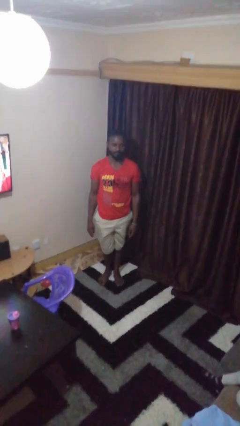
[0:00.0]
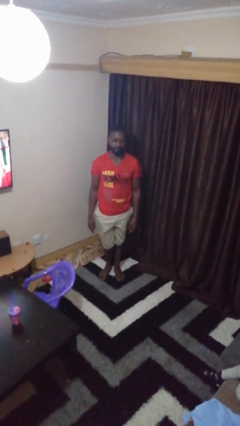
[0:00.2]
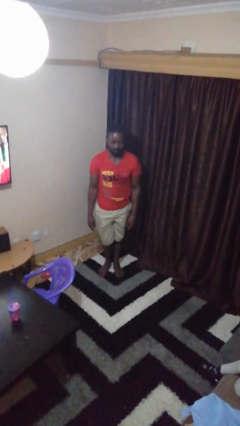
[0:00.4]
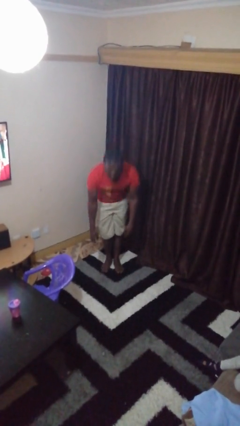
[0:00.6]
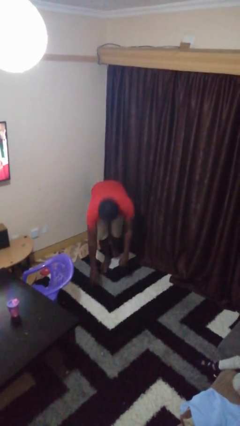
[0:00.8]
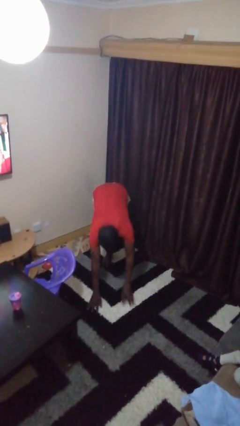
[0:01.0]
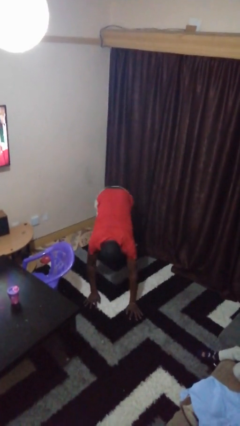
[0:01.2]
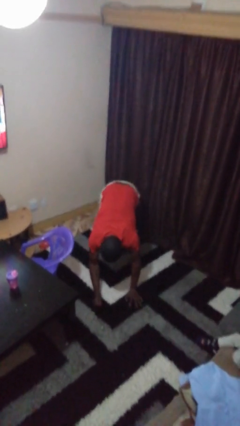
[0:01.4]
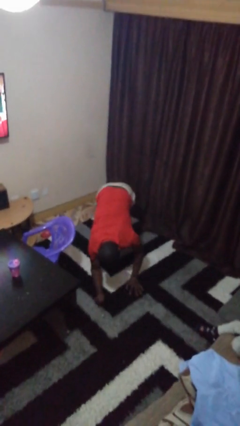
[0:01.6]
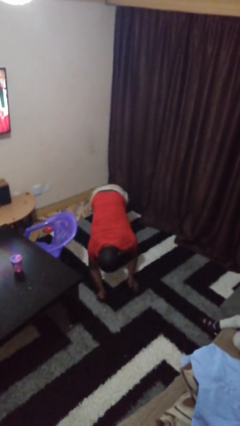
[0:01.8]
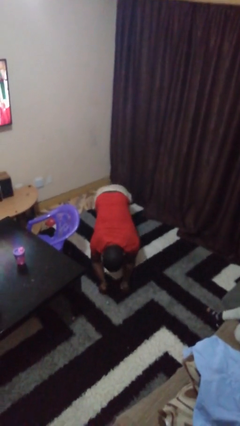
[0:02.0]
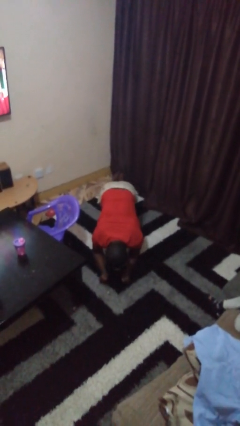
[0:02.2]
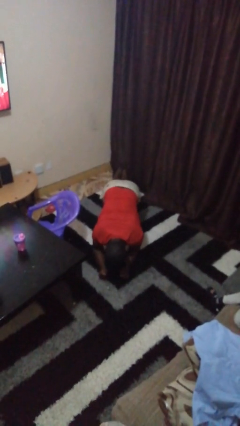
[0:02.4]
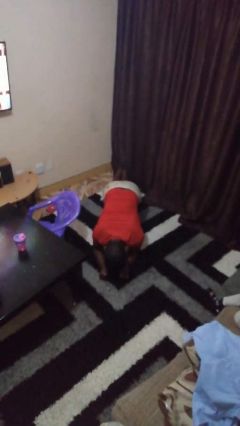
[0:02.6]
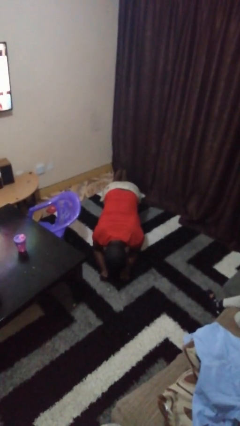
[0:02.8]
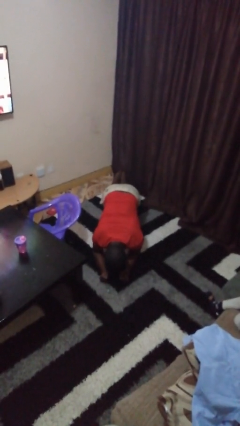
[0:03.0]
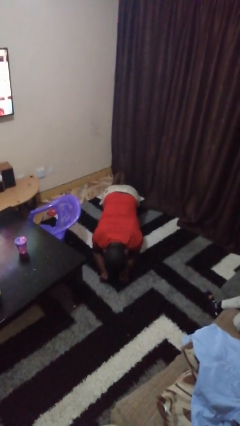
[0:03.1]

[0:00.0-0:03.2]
person exercises with plank

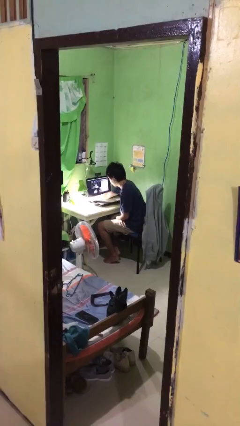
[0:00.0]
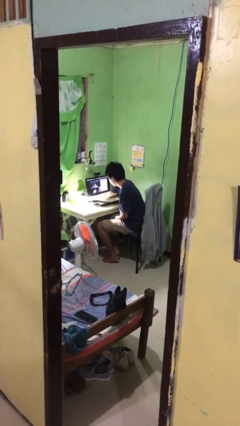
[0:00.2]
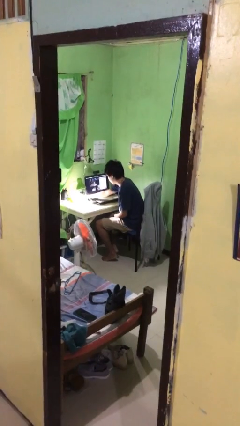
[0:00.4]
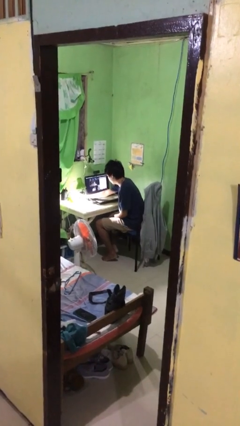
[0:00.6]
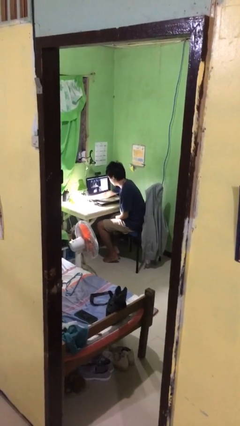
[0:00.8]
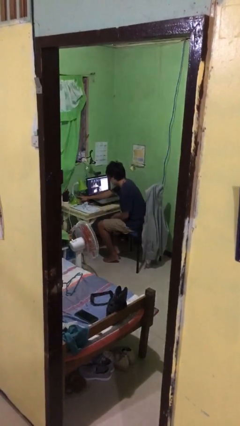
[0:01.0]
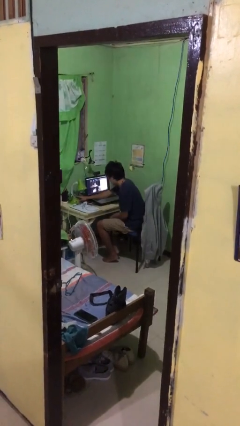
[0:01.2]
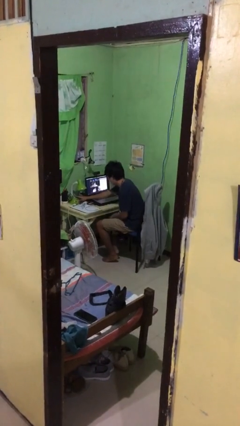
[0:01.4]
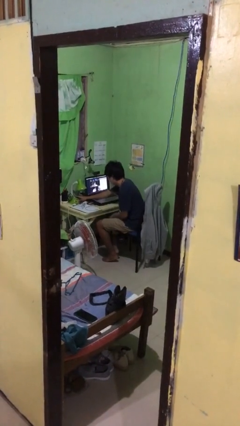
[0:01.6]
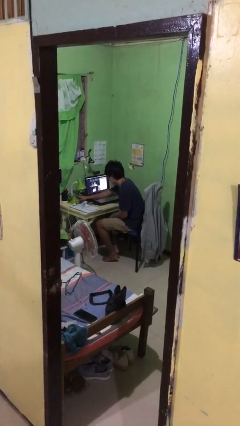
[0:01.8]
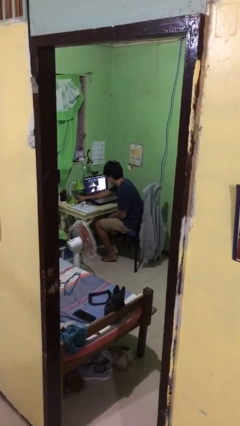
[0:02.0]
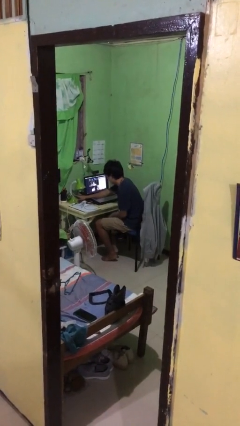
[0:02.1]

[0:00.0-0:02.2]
person turns off lamp

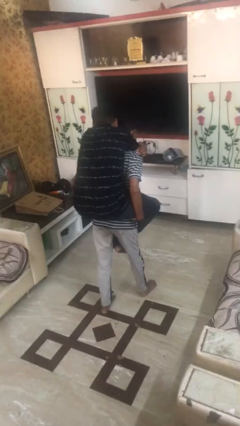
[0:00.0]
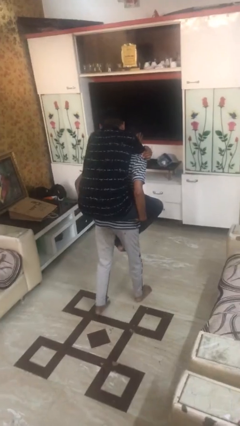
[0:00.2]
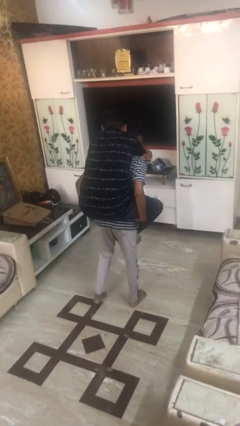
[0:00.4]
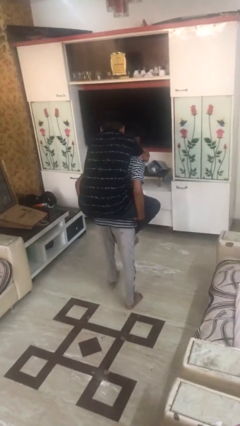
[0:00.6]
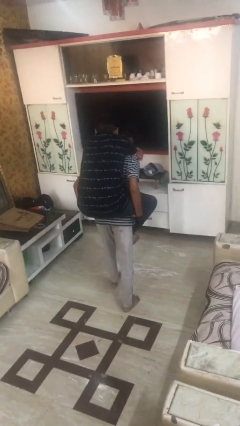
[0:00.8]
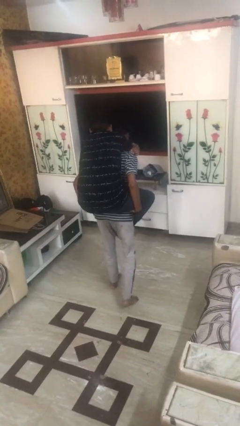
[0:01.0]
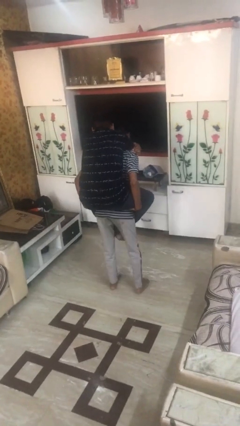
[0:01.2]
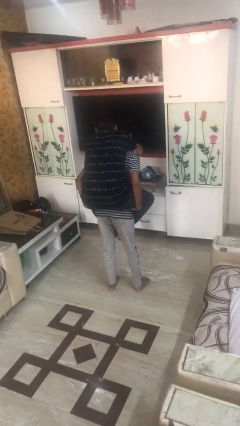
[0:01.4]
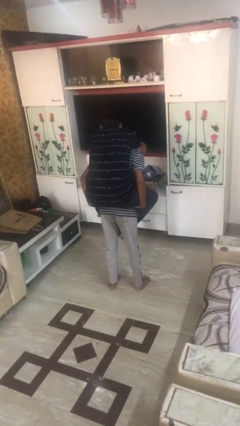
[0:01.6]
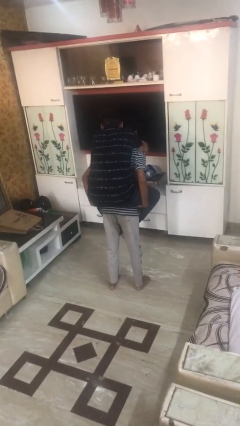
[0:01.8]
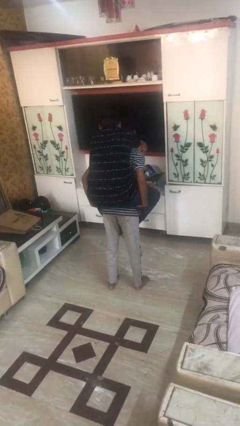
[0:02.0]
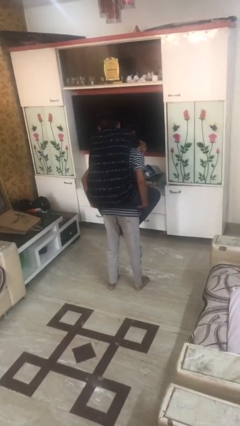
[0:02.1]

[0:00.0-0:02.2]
person carries person on back

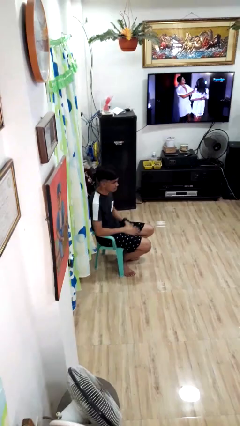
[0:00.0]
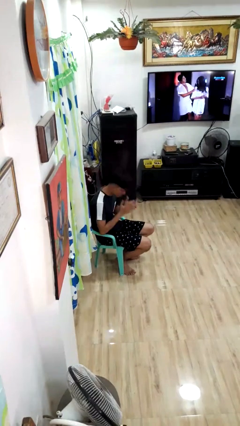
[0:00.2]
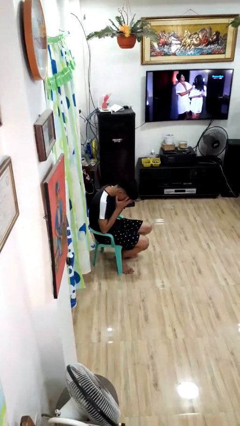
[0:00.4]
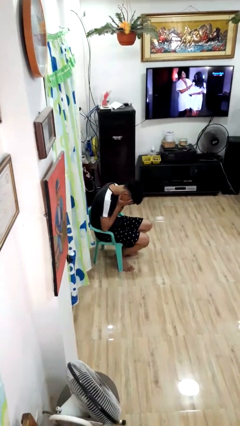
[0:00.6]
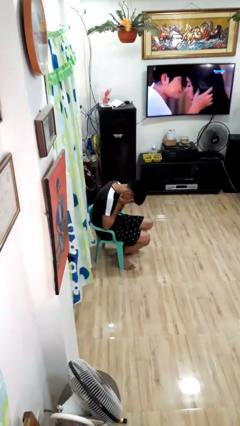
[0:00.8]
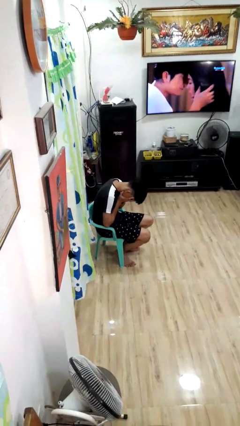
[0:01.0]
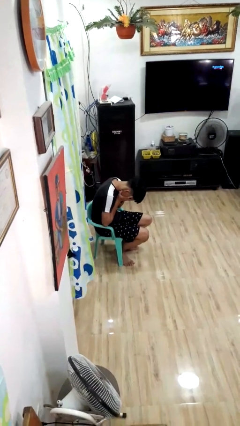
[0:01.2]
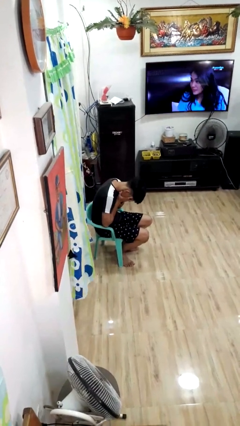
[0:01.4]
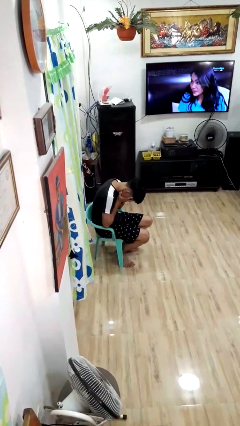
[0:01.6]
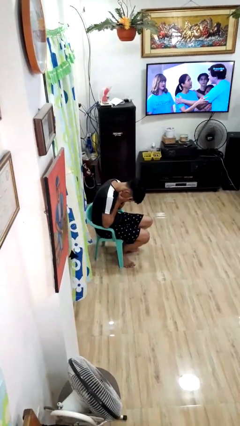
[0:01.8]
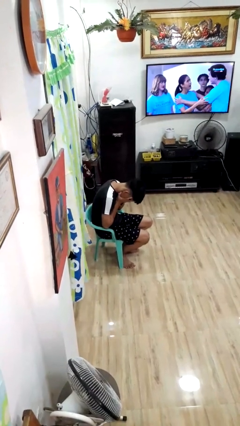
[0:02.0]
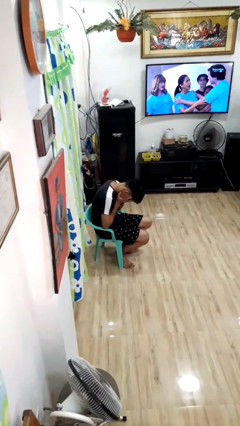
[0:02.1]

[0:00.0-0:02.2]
person covers face with hands

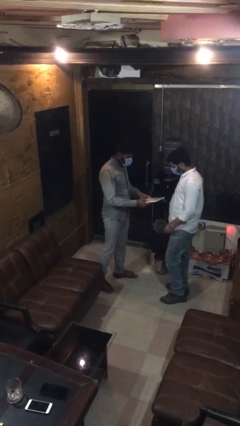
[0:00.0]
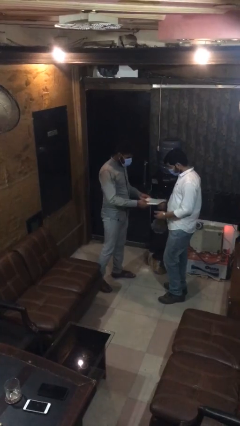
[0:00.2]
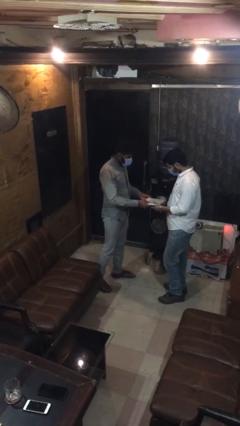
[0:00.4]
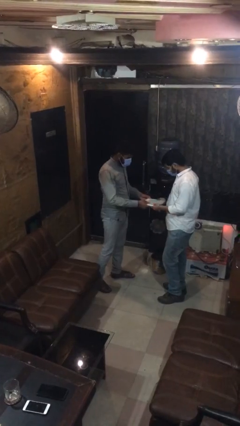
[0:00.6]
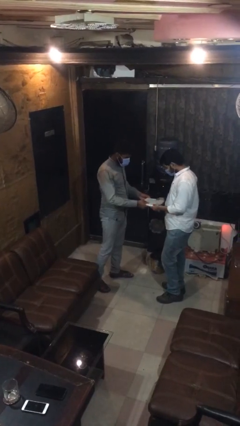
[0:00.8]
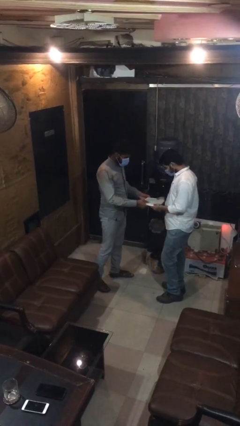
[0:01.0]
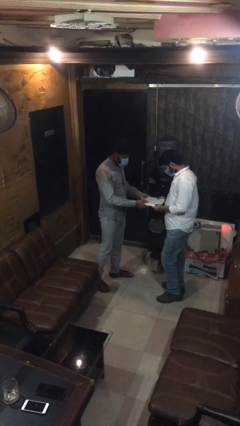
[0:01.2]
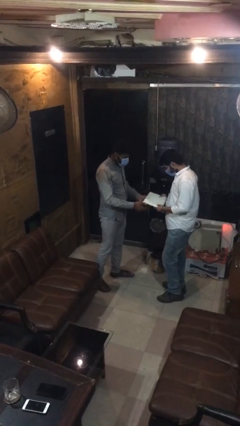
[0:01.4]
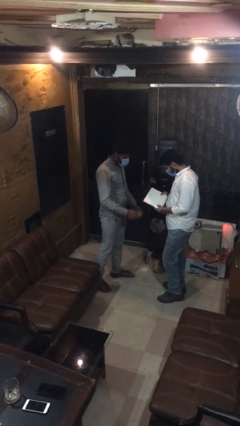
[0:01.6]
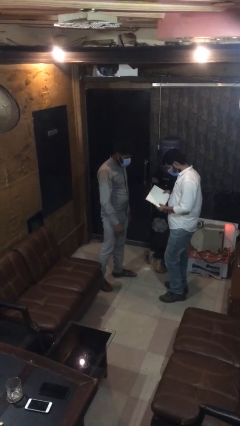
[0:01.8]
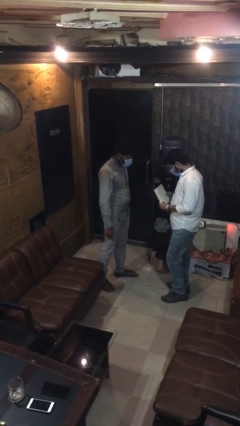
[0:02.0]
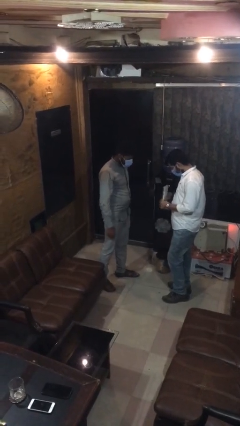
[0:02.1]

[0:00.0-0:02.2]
person transfers object to person

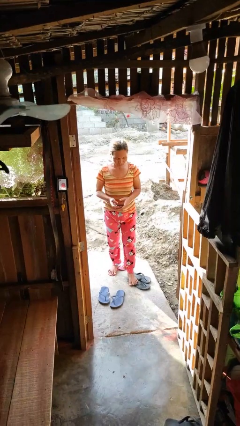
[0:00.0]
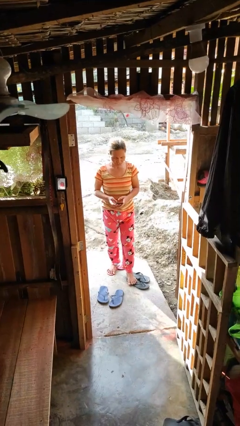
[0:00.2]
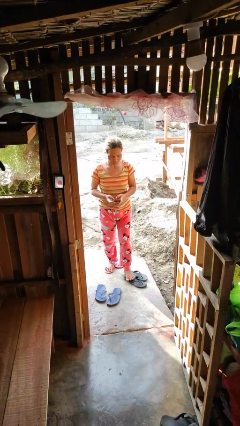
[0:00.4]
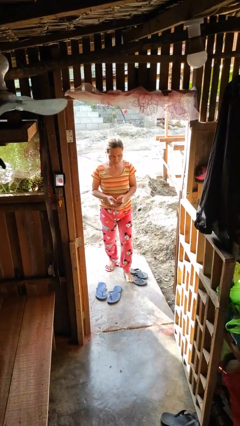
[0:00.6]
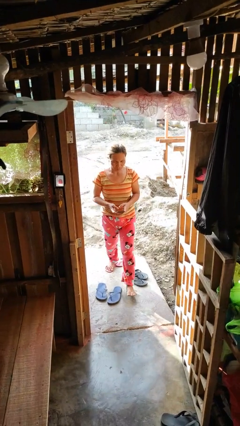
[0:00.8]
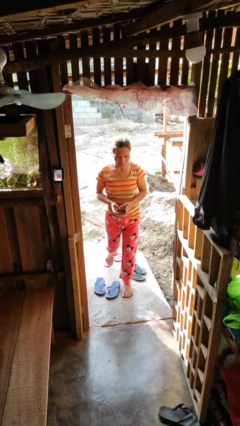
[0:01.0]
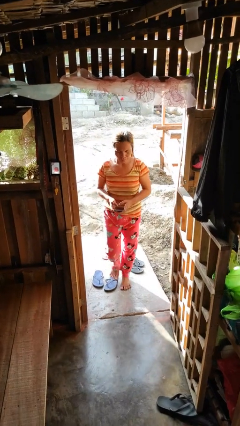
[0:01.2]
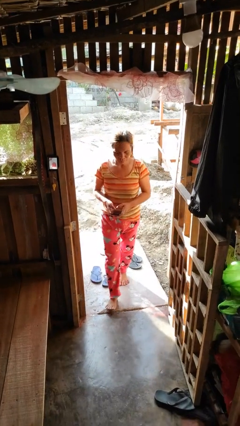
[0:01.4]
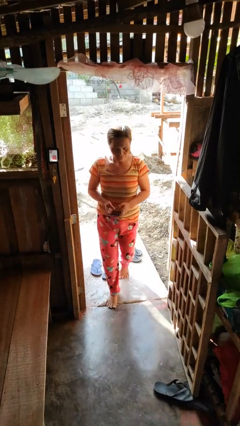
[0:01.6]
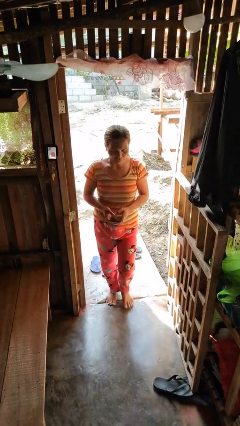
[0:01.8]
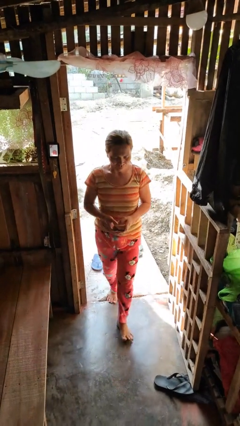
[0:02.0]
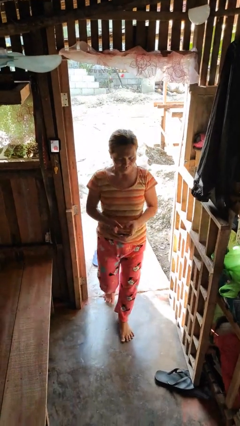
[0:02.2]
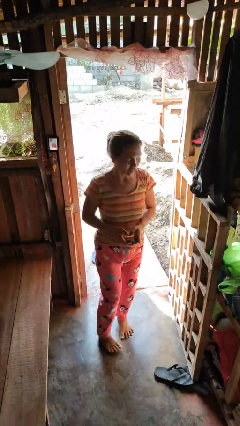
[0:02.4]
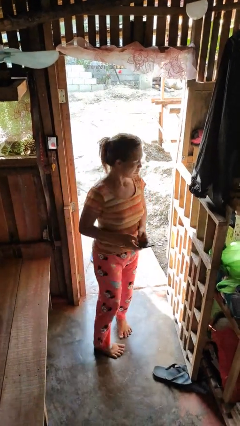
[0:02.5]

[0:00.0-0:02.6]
person enters scene through structure

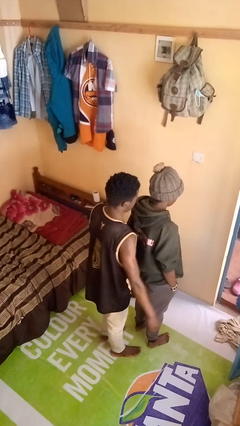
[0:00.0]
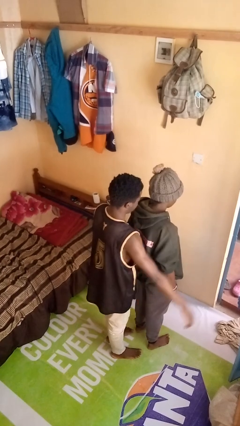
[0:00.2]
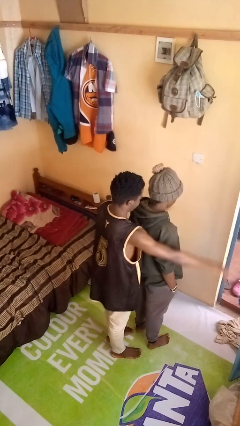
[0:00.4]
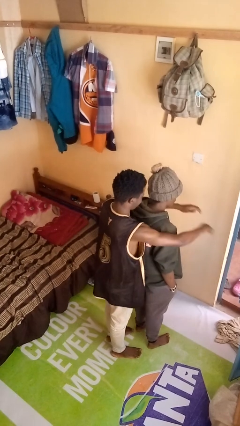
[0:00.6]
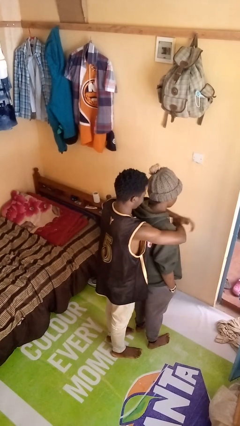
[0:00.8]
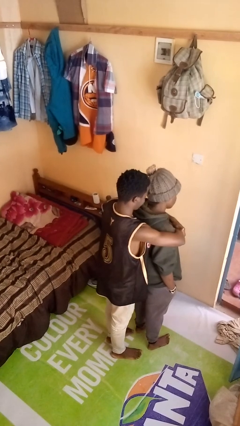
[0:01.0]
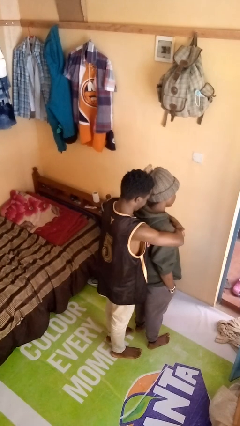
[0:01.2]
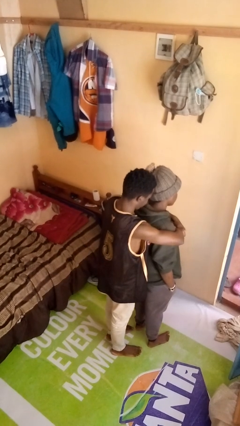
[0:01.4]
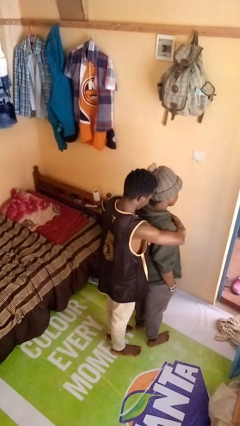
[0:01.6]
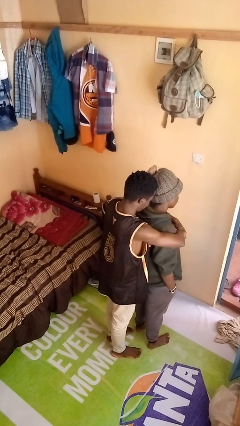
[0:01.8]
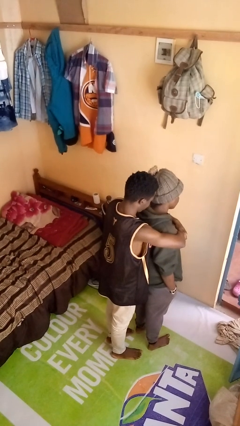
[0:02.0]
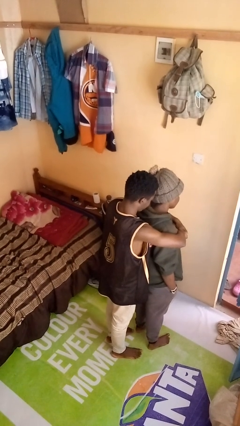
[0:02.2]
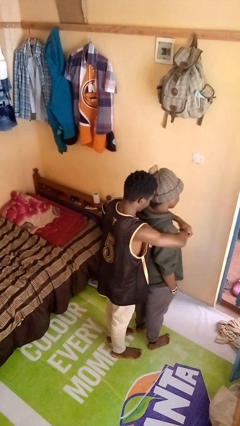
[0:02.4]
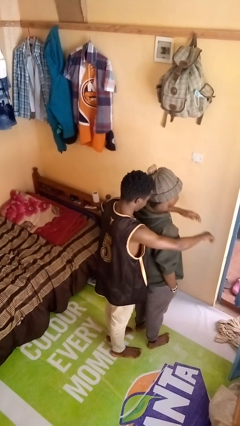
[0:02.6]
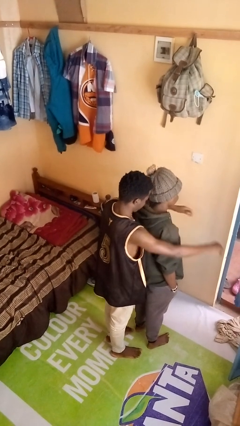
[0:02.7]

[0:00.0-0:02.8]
person hugs person from behind
